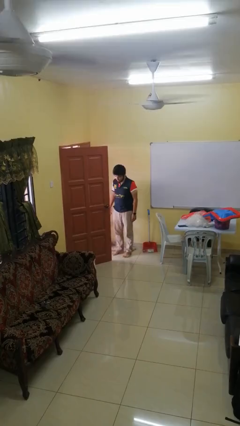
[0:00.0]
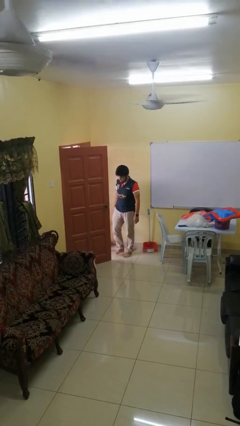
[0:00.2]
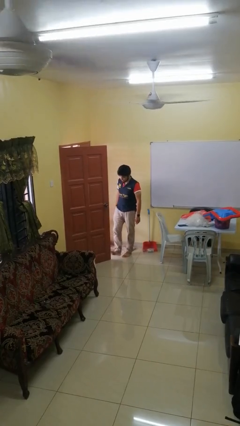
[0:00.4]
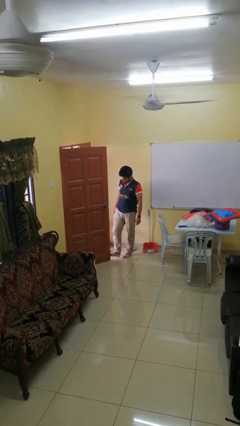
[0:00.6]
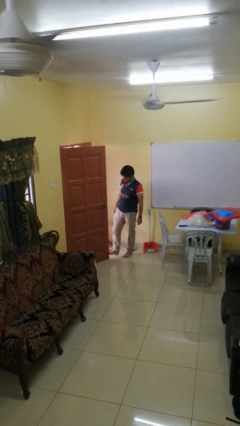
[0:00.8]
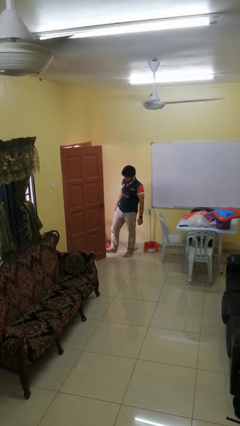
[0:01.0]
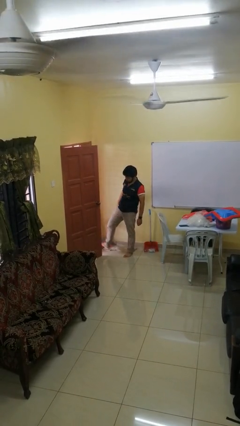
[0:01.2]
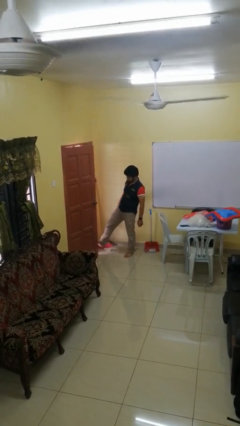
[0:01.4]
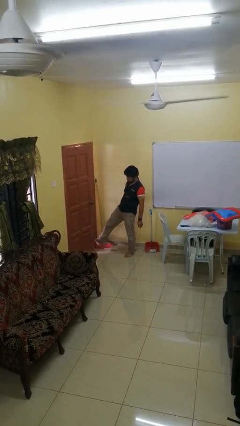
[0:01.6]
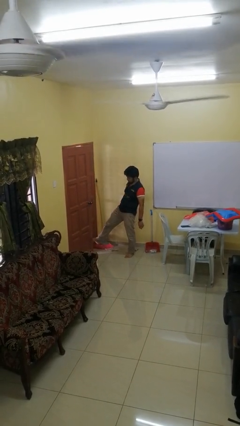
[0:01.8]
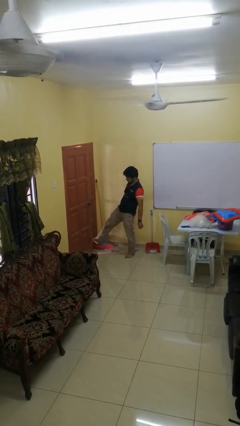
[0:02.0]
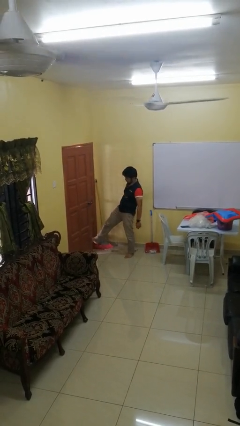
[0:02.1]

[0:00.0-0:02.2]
person closes door with foot

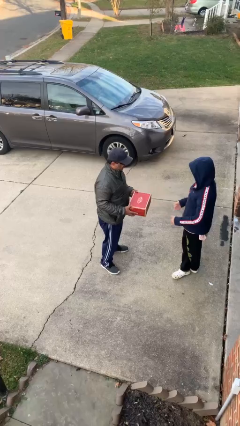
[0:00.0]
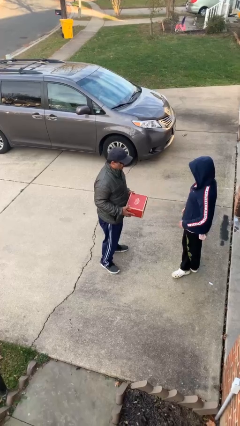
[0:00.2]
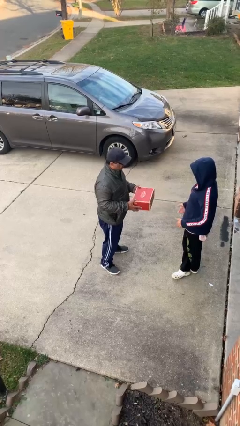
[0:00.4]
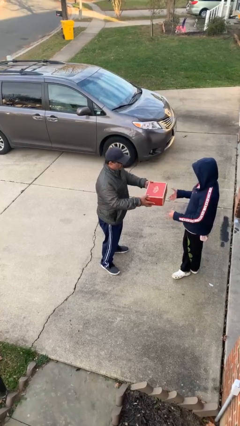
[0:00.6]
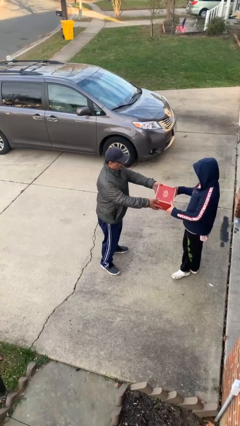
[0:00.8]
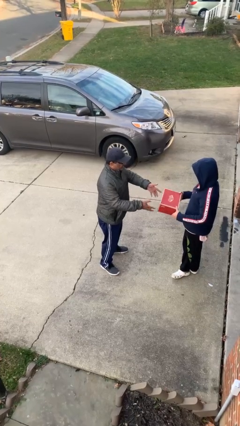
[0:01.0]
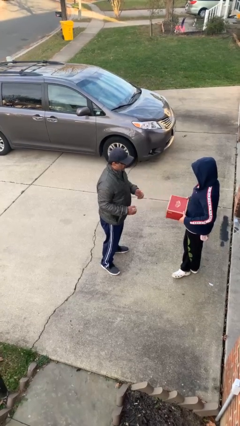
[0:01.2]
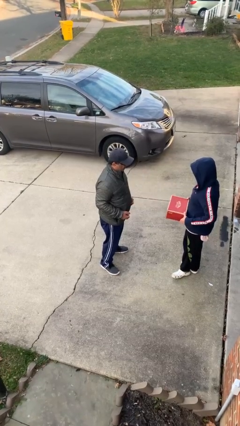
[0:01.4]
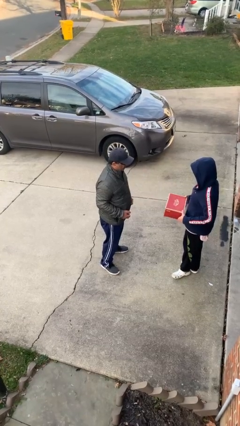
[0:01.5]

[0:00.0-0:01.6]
person transfers object to person

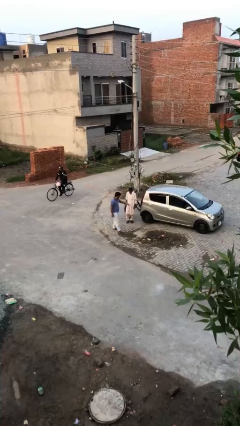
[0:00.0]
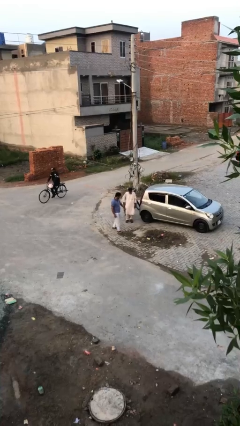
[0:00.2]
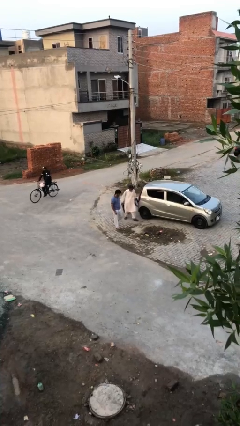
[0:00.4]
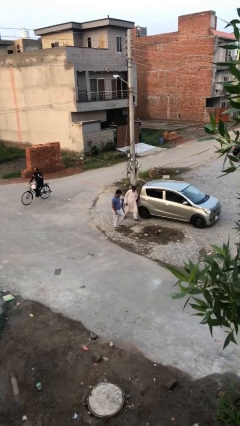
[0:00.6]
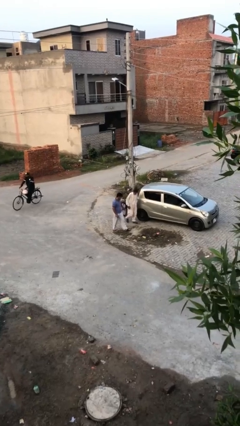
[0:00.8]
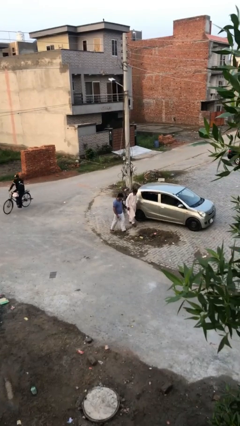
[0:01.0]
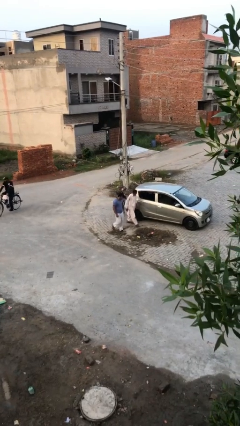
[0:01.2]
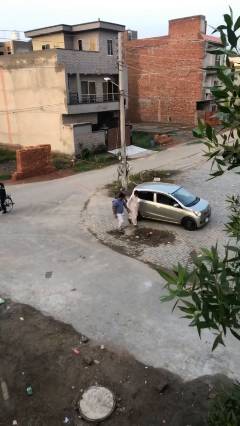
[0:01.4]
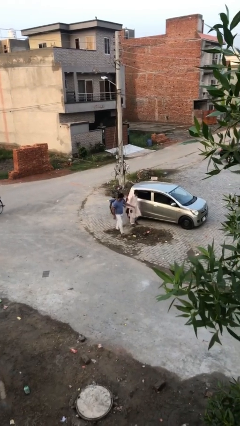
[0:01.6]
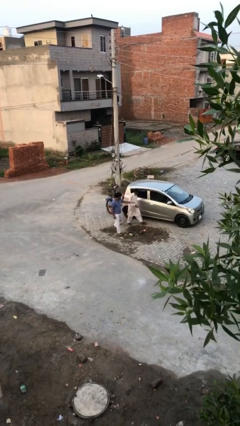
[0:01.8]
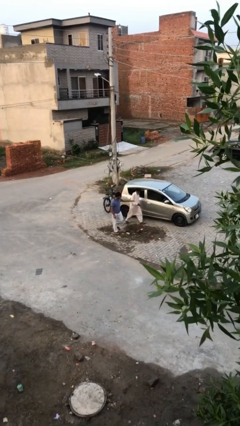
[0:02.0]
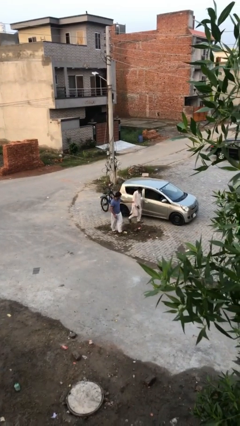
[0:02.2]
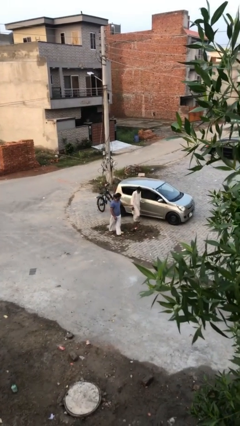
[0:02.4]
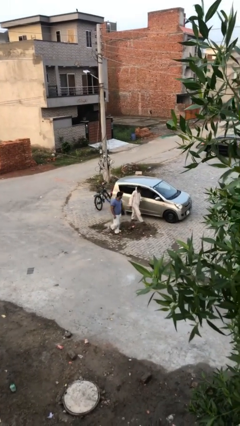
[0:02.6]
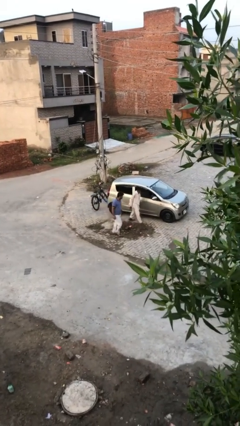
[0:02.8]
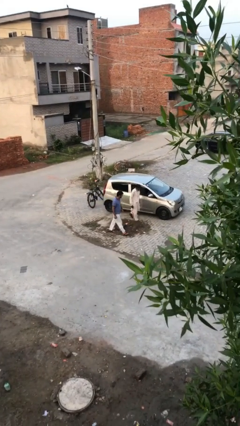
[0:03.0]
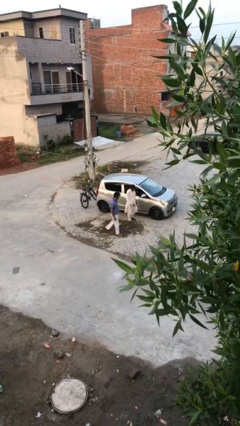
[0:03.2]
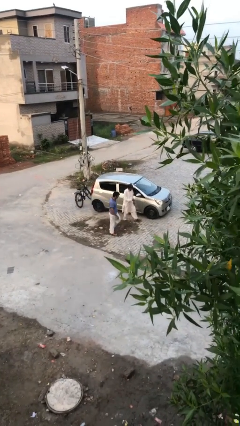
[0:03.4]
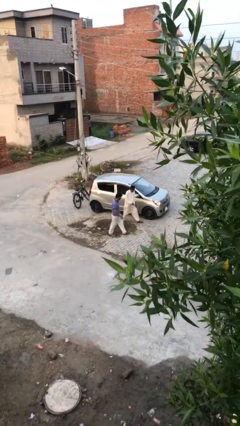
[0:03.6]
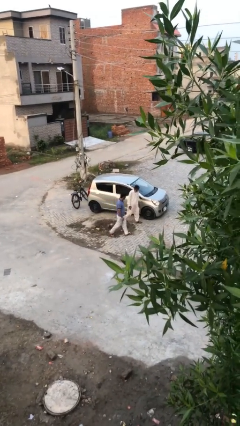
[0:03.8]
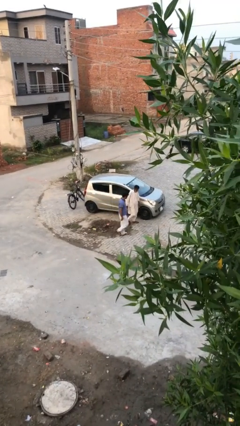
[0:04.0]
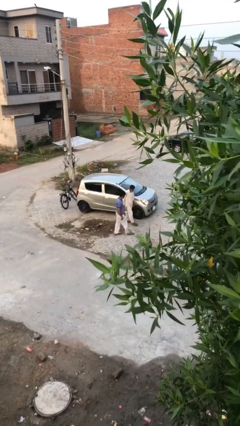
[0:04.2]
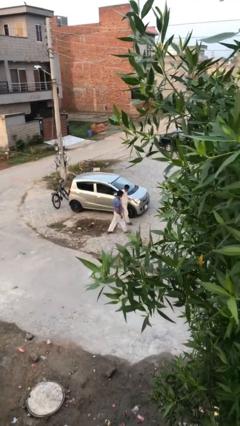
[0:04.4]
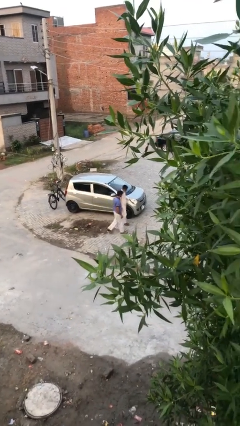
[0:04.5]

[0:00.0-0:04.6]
person talks to person

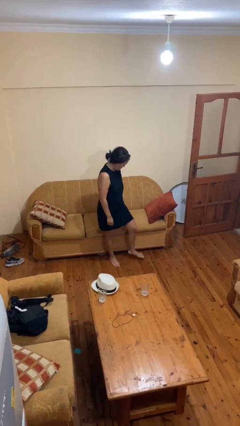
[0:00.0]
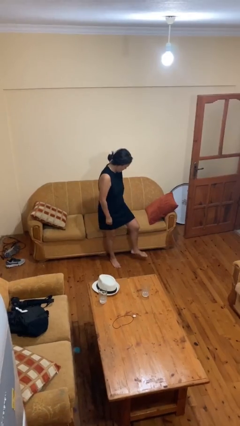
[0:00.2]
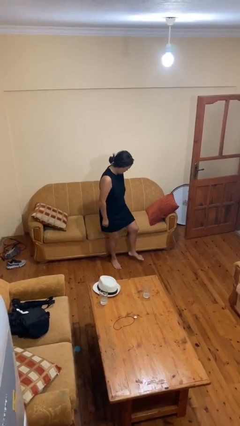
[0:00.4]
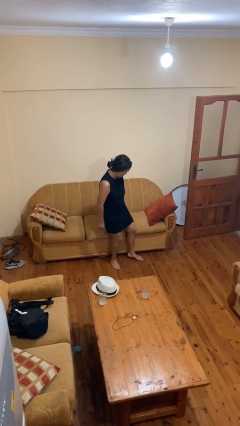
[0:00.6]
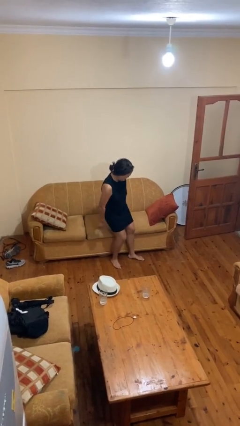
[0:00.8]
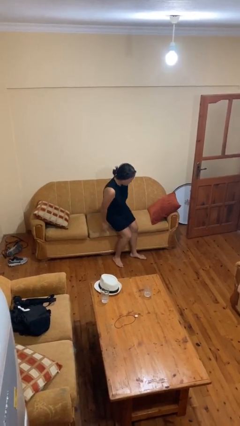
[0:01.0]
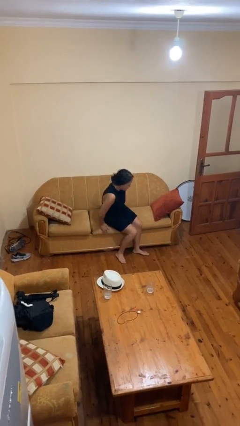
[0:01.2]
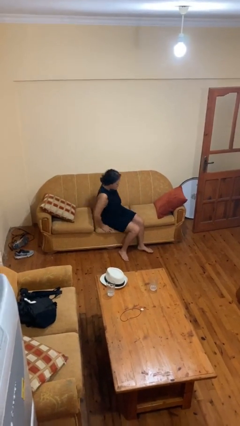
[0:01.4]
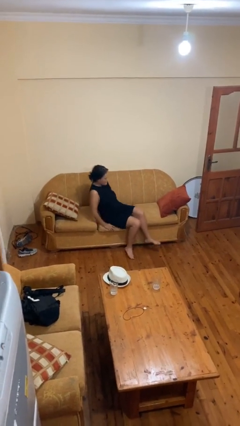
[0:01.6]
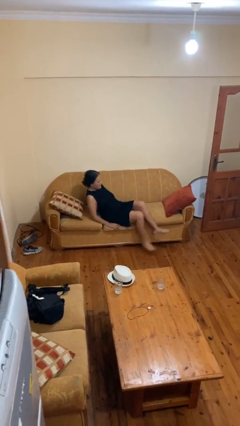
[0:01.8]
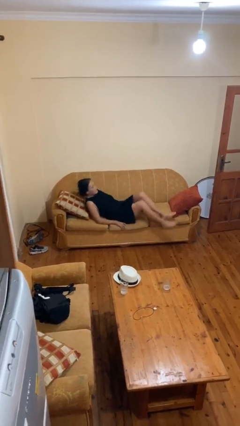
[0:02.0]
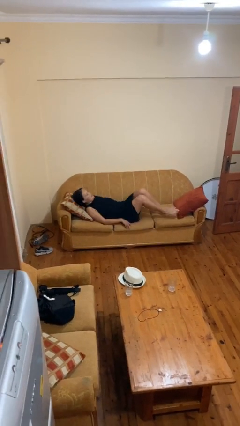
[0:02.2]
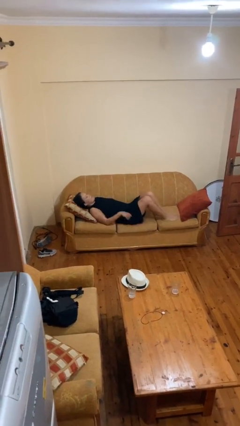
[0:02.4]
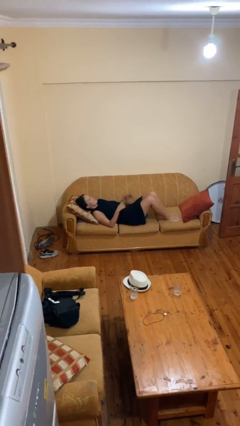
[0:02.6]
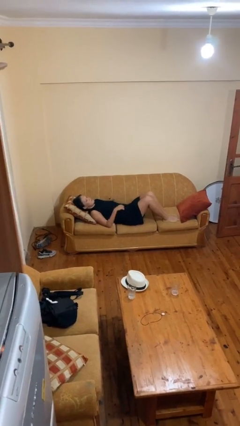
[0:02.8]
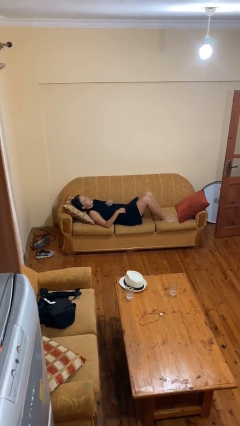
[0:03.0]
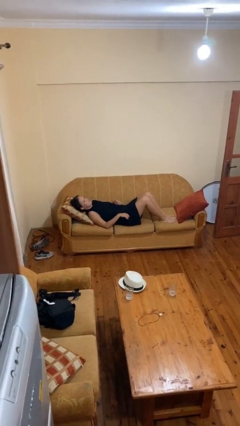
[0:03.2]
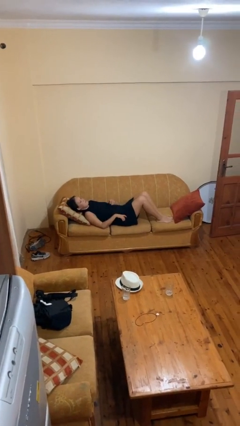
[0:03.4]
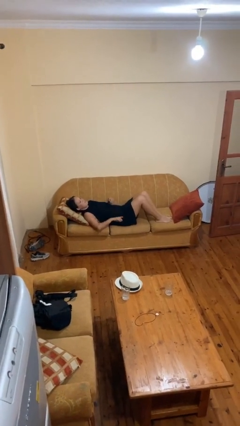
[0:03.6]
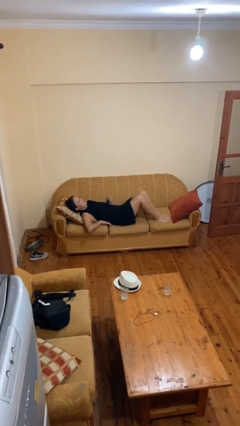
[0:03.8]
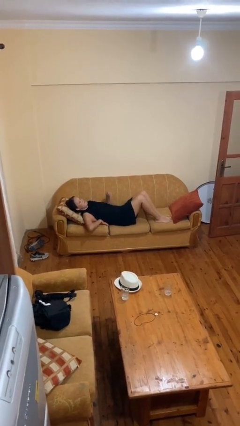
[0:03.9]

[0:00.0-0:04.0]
person lies down on couch

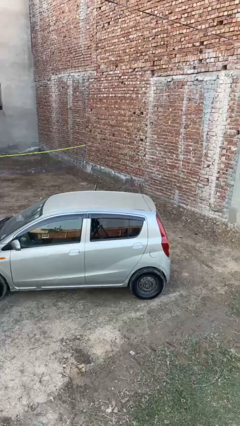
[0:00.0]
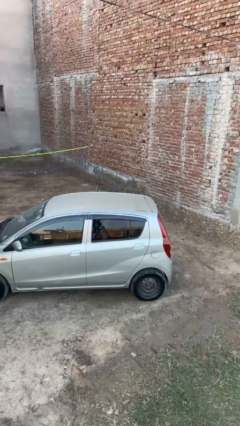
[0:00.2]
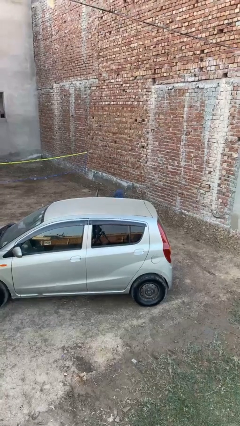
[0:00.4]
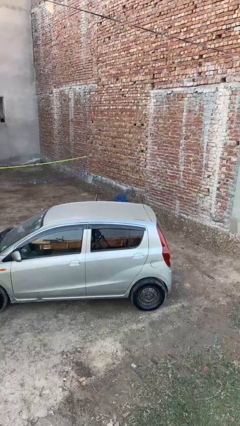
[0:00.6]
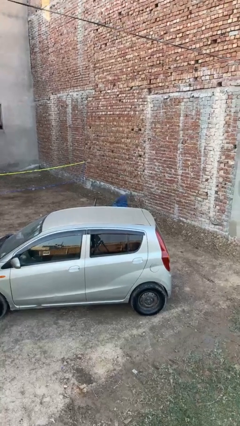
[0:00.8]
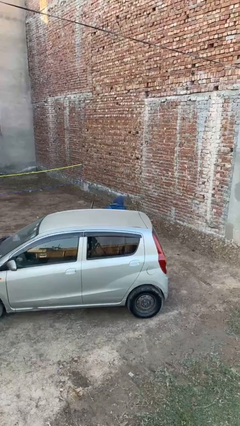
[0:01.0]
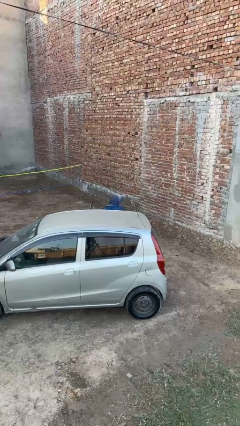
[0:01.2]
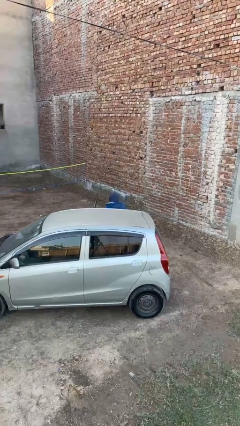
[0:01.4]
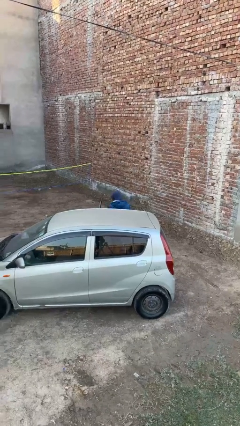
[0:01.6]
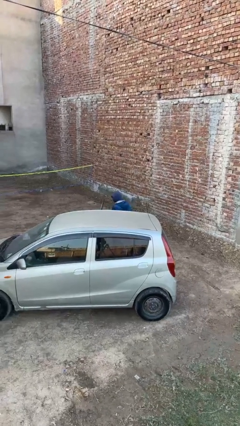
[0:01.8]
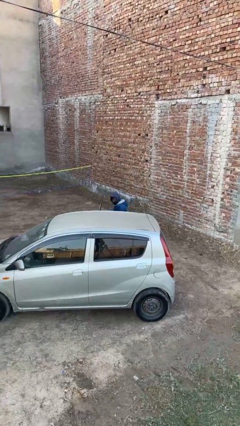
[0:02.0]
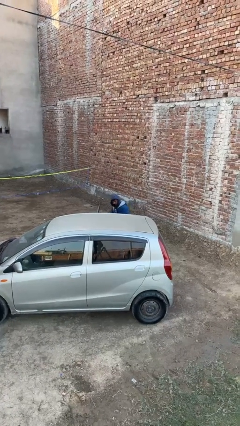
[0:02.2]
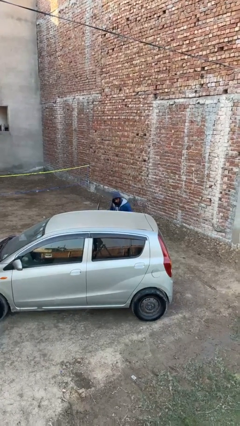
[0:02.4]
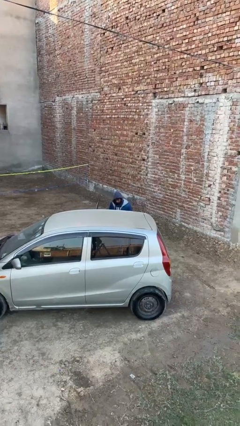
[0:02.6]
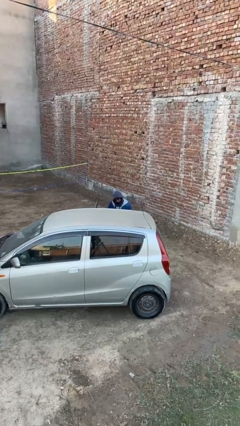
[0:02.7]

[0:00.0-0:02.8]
person exits car

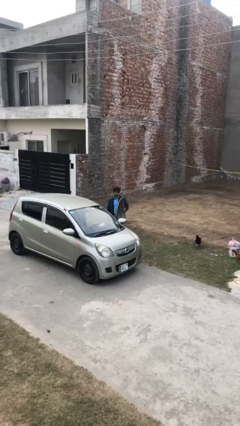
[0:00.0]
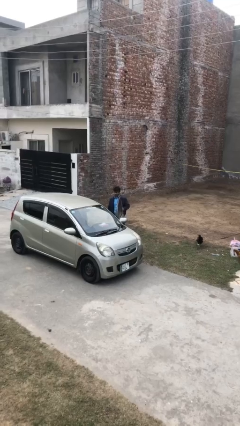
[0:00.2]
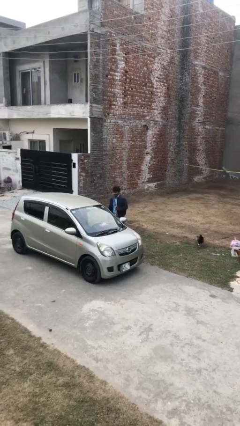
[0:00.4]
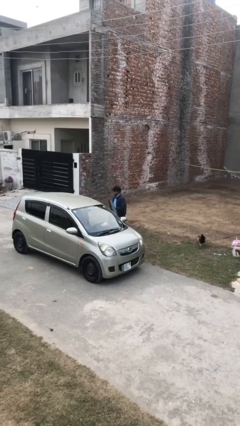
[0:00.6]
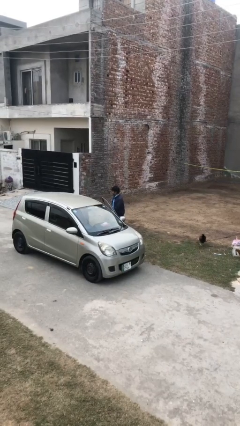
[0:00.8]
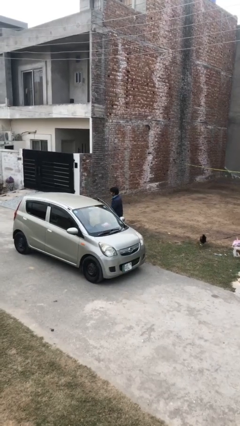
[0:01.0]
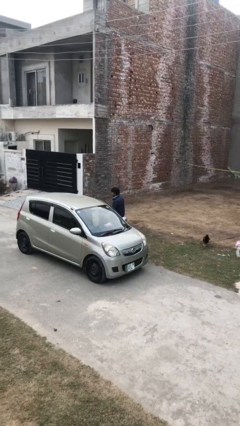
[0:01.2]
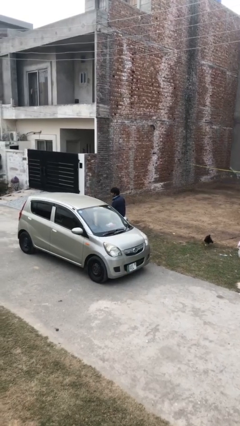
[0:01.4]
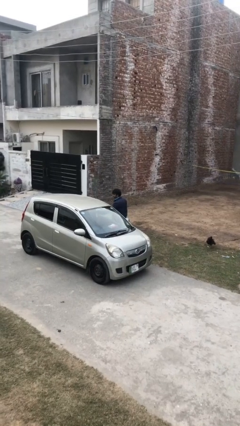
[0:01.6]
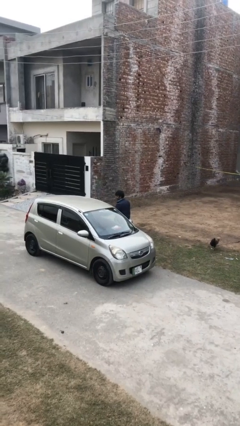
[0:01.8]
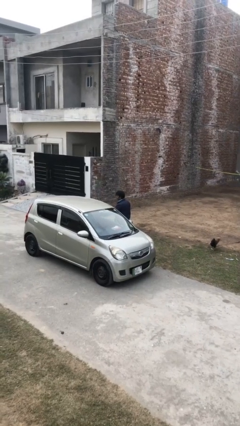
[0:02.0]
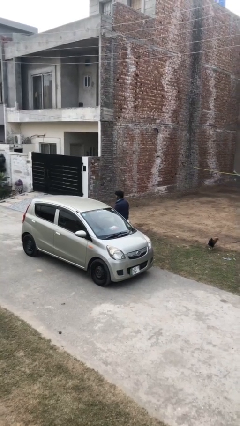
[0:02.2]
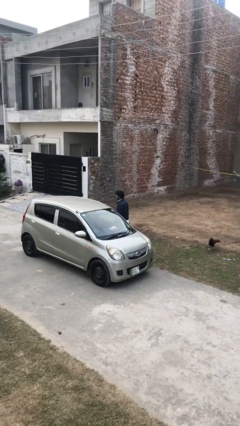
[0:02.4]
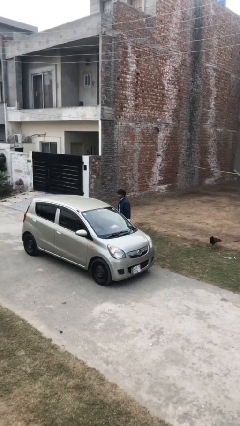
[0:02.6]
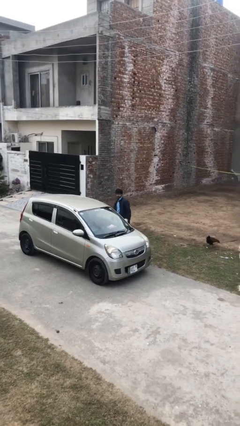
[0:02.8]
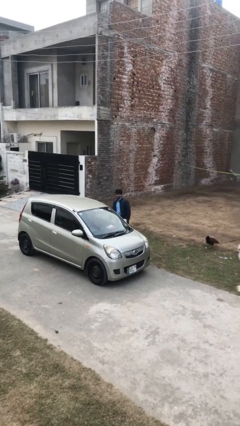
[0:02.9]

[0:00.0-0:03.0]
person closes car door
